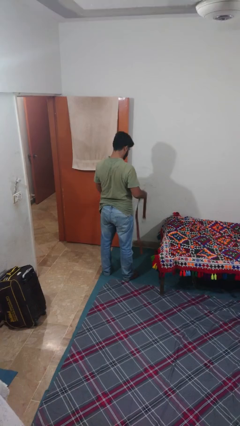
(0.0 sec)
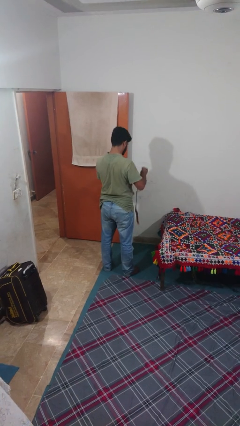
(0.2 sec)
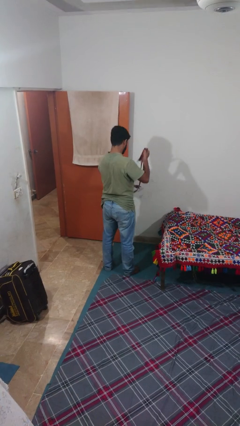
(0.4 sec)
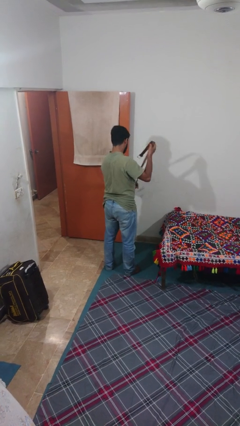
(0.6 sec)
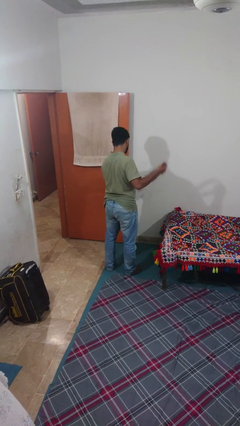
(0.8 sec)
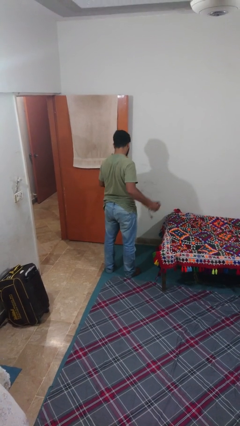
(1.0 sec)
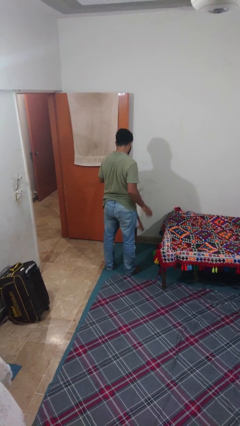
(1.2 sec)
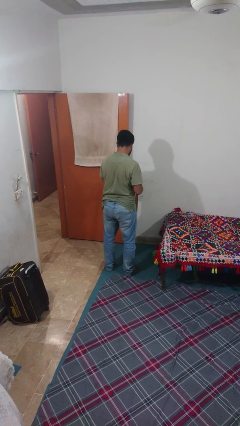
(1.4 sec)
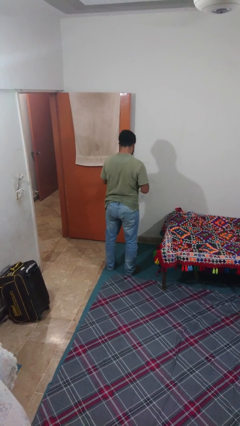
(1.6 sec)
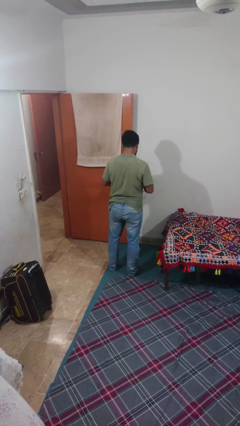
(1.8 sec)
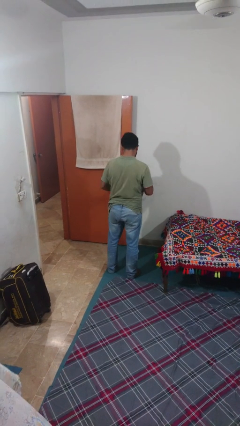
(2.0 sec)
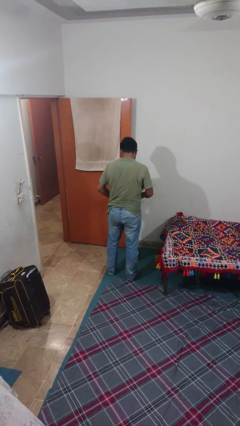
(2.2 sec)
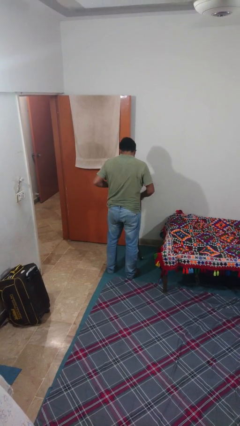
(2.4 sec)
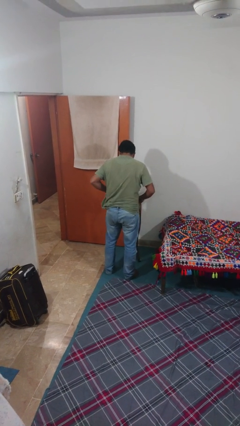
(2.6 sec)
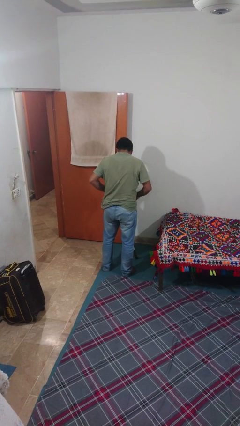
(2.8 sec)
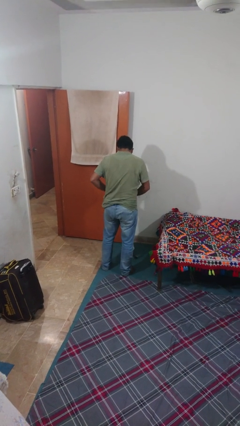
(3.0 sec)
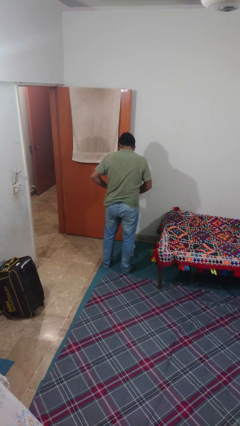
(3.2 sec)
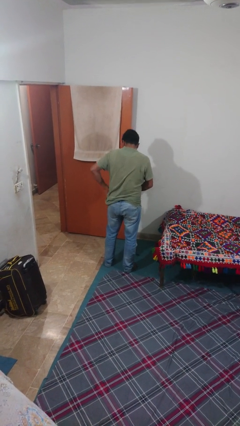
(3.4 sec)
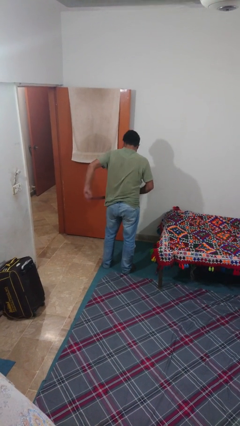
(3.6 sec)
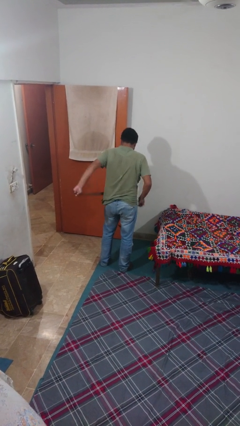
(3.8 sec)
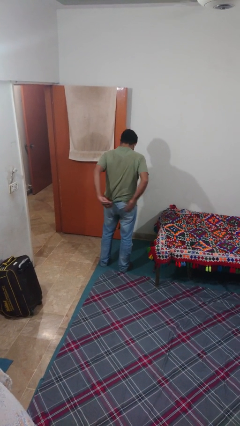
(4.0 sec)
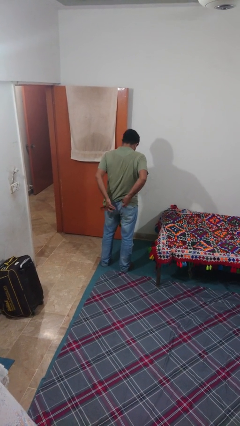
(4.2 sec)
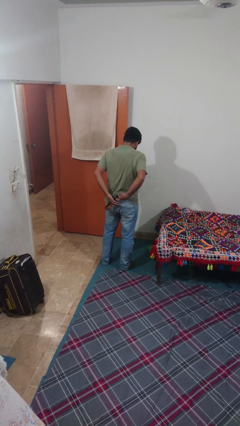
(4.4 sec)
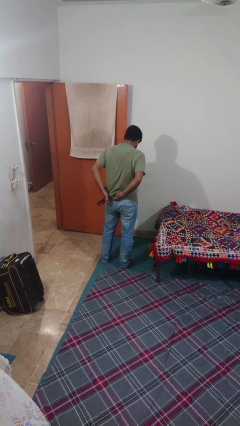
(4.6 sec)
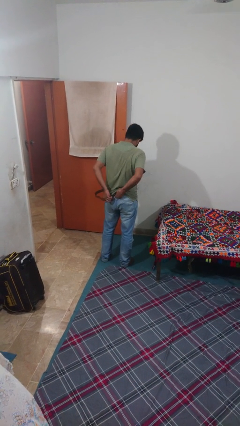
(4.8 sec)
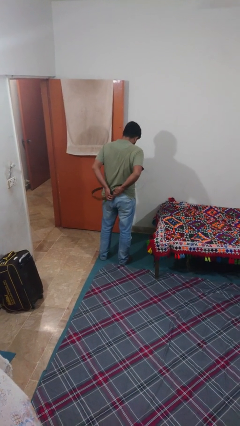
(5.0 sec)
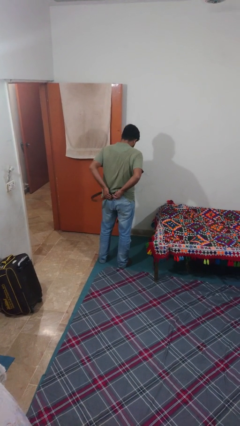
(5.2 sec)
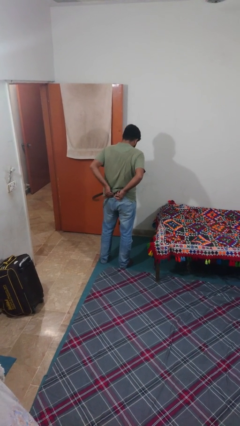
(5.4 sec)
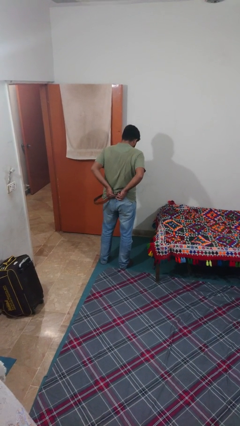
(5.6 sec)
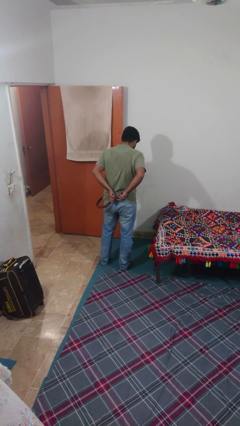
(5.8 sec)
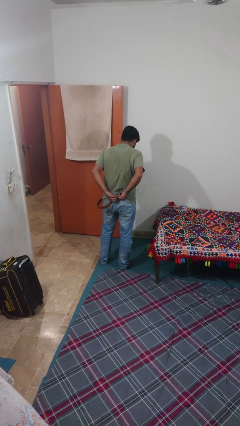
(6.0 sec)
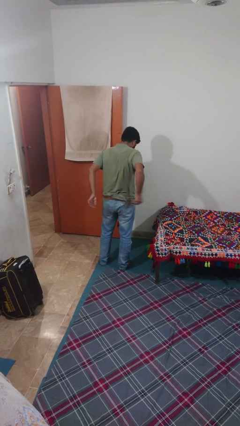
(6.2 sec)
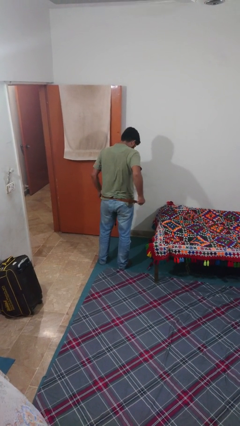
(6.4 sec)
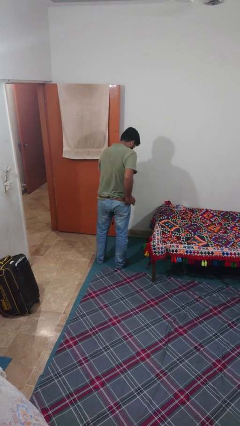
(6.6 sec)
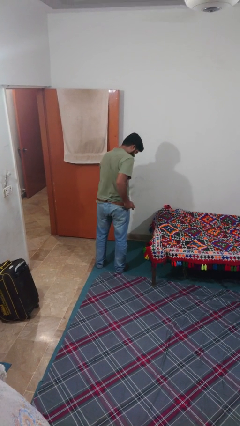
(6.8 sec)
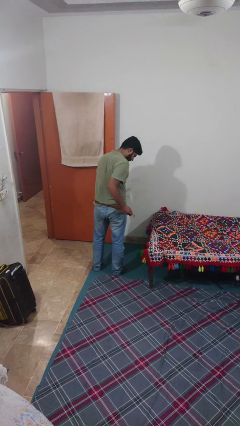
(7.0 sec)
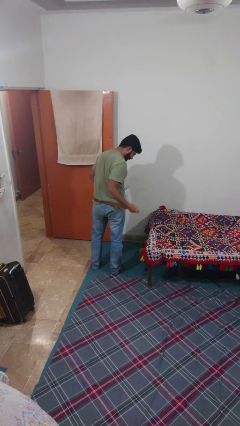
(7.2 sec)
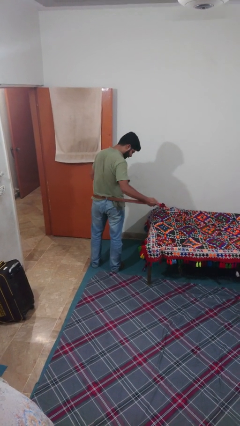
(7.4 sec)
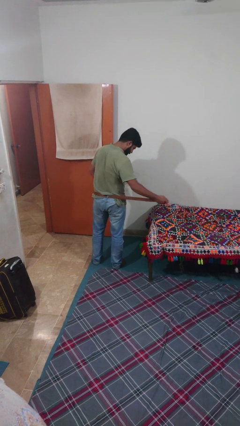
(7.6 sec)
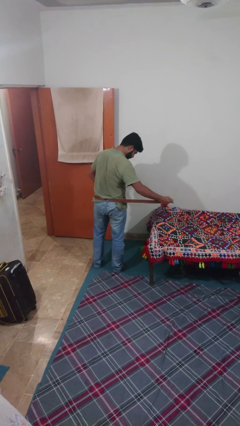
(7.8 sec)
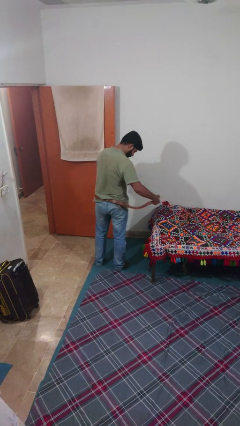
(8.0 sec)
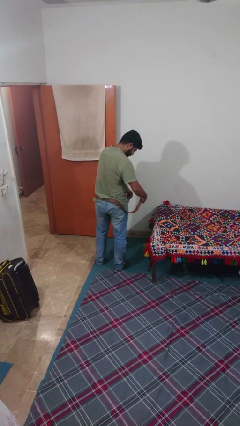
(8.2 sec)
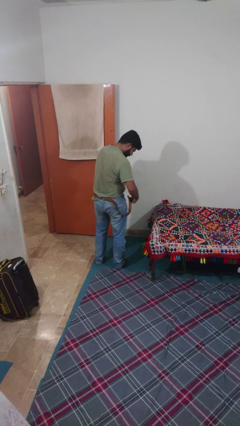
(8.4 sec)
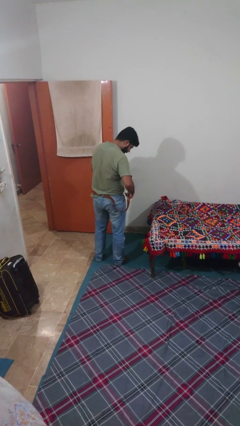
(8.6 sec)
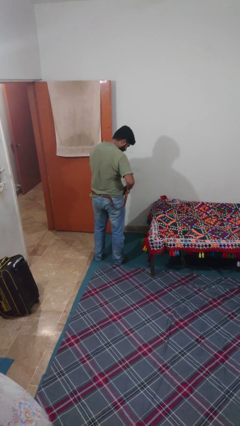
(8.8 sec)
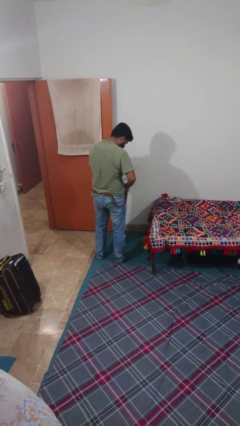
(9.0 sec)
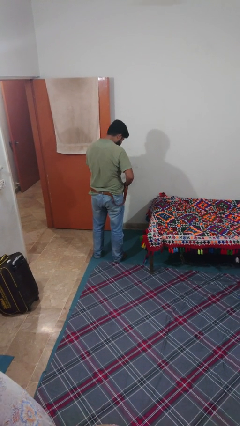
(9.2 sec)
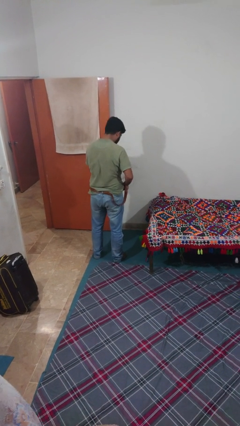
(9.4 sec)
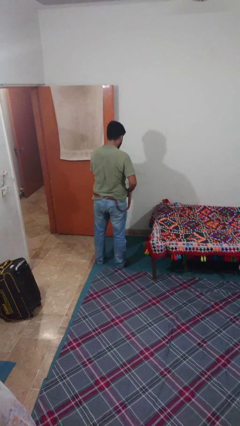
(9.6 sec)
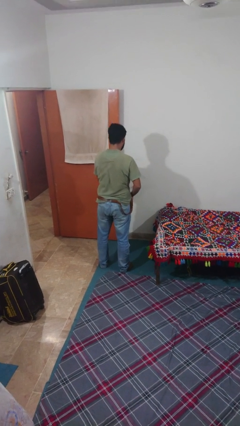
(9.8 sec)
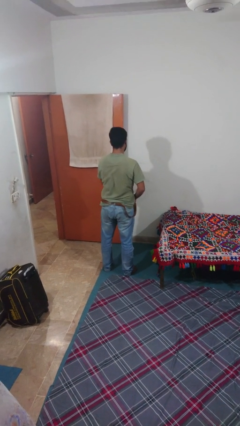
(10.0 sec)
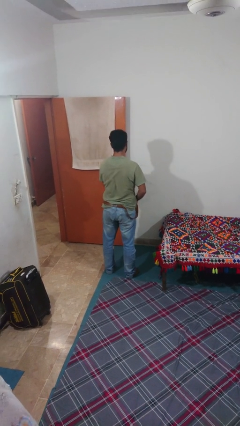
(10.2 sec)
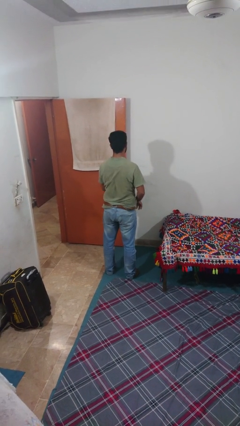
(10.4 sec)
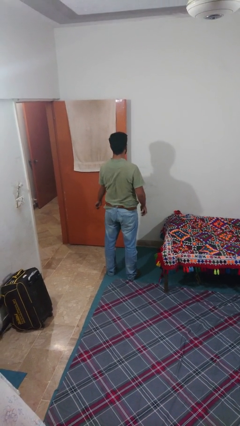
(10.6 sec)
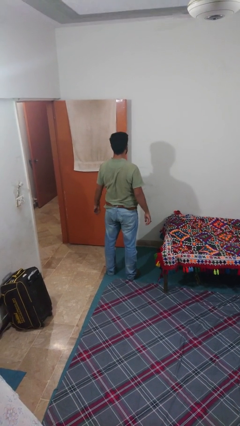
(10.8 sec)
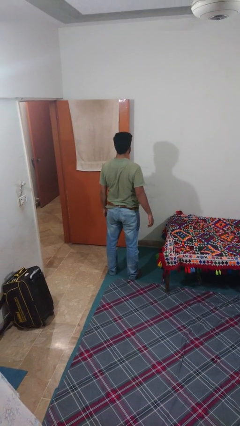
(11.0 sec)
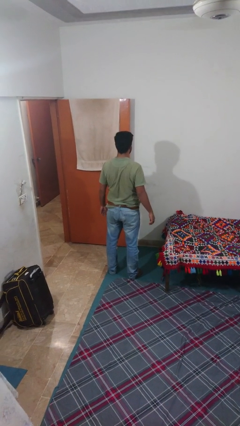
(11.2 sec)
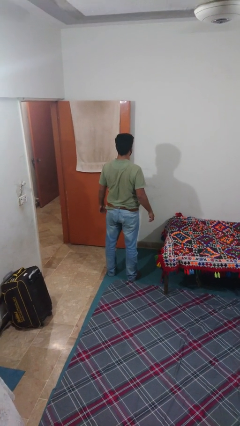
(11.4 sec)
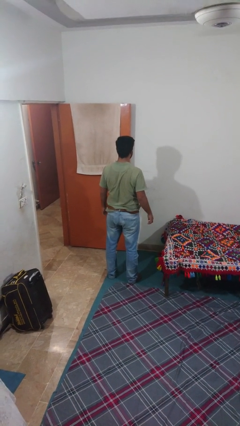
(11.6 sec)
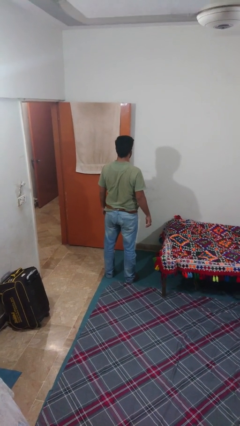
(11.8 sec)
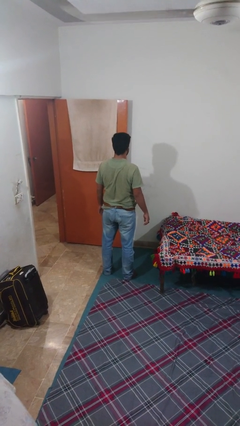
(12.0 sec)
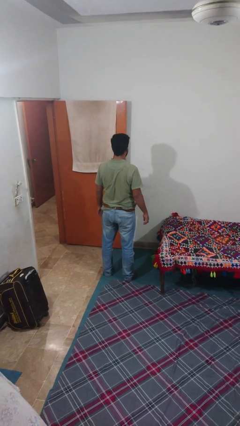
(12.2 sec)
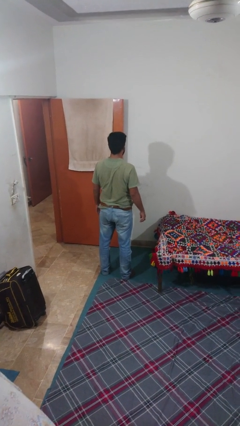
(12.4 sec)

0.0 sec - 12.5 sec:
person puts on belt

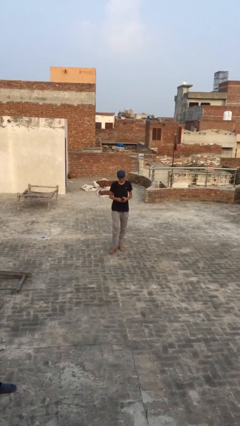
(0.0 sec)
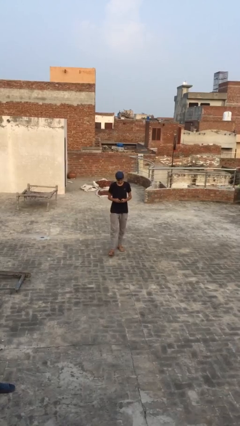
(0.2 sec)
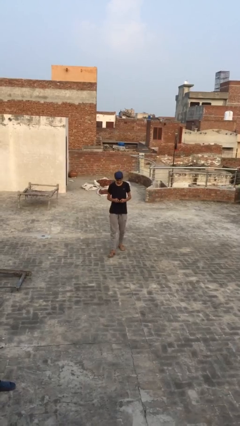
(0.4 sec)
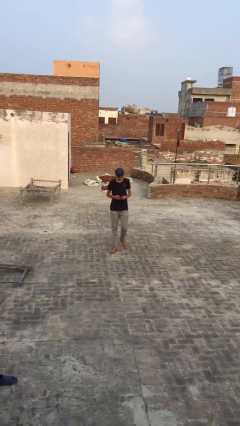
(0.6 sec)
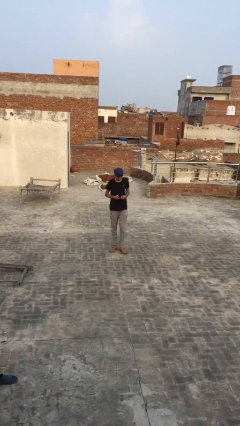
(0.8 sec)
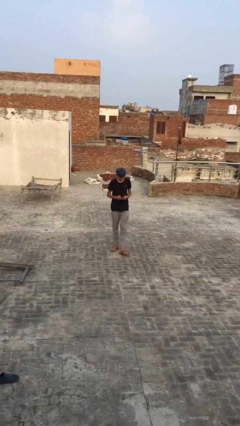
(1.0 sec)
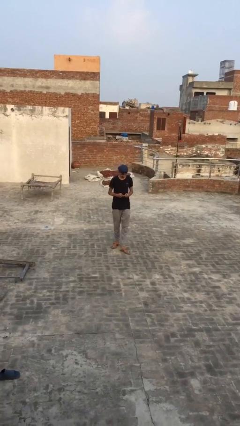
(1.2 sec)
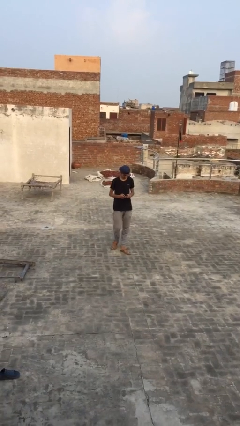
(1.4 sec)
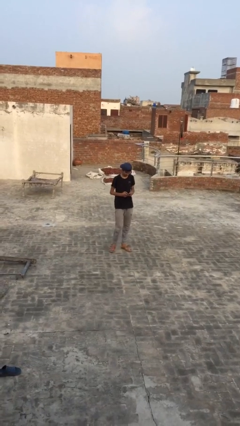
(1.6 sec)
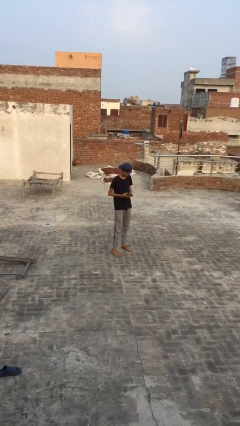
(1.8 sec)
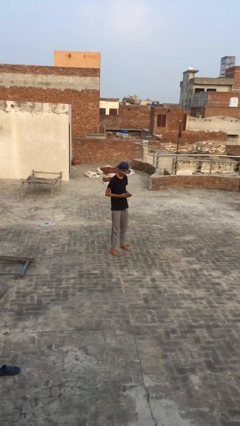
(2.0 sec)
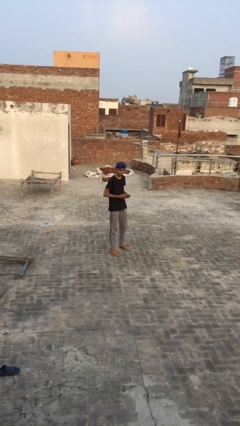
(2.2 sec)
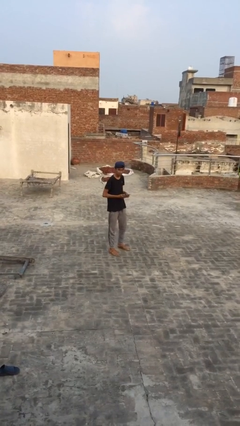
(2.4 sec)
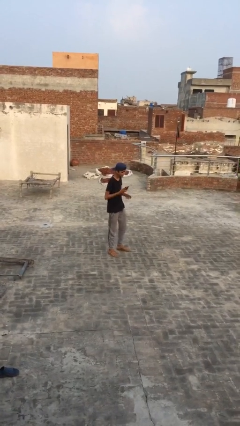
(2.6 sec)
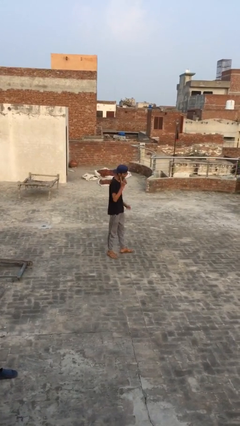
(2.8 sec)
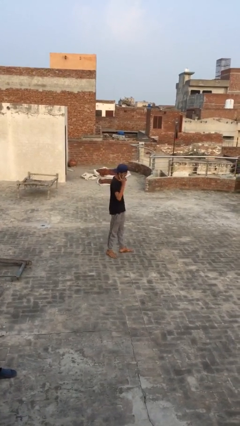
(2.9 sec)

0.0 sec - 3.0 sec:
person texts on phone

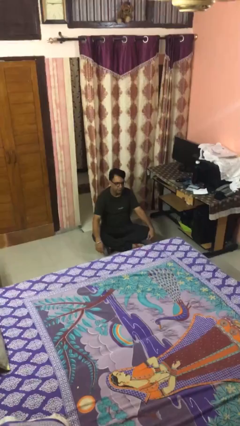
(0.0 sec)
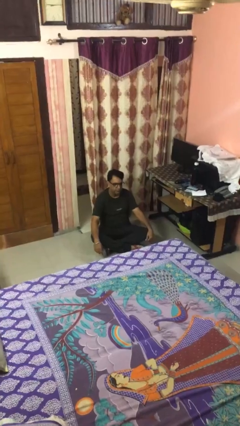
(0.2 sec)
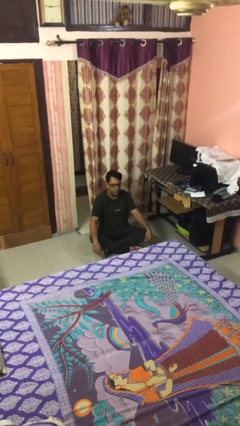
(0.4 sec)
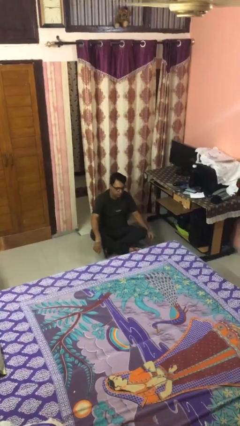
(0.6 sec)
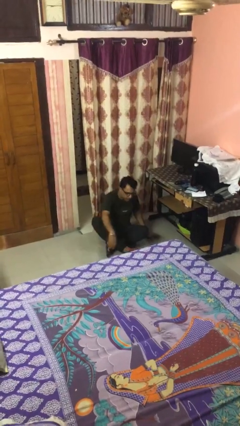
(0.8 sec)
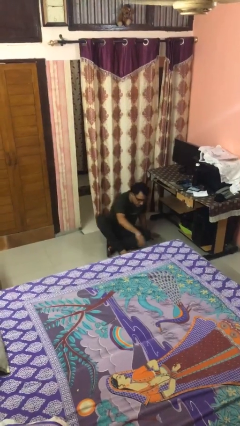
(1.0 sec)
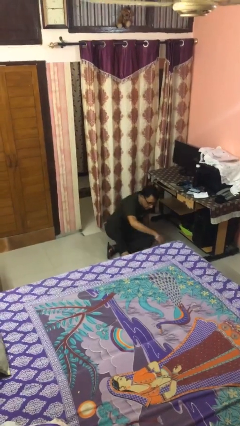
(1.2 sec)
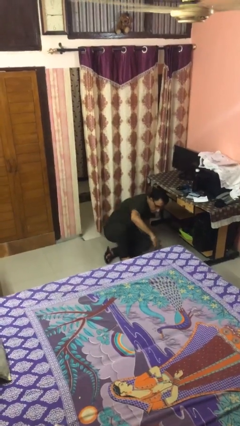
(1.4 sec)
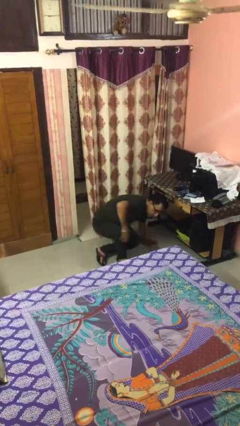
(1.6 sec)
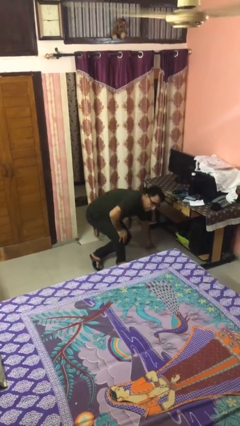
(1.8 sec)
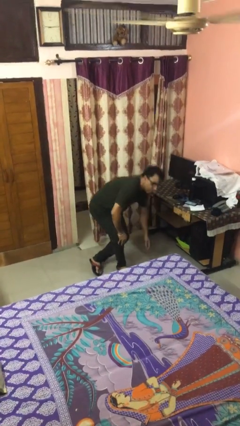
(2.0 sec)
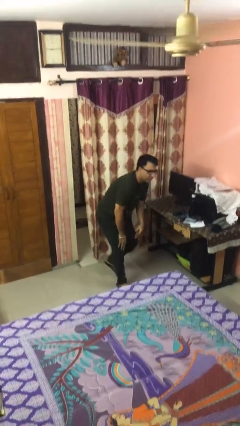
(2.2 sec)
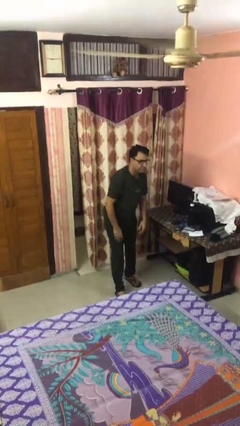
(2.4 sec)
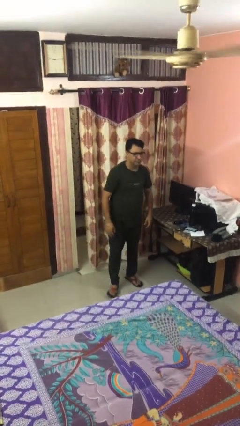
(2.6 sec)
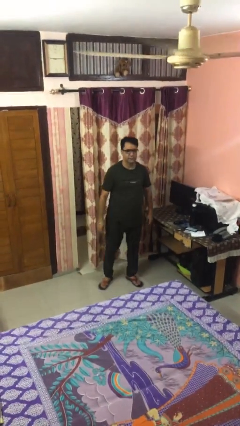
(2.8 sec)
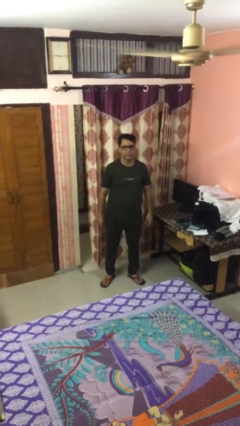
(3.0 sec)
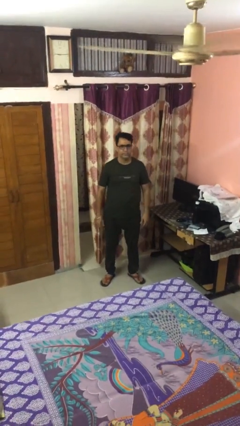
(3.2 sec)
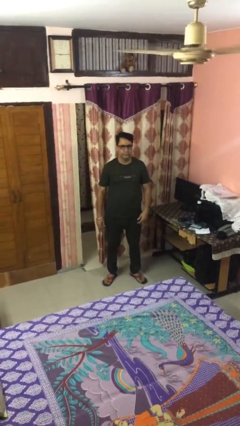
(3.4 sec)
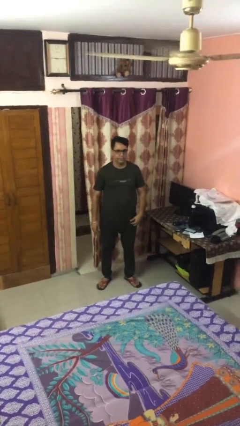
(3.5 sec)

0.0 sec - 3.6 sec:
person stands up from floor
